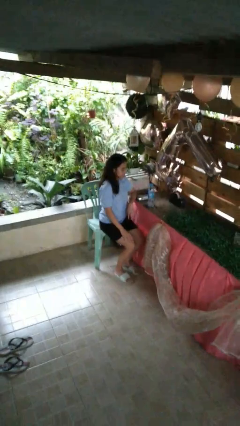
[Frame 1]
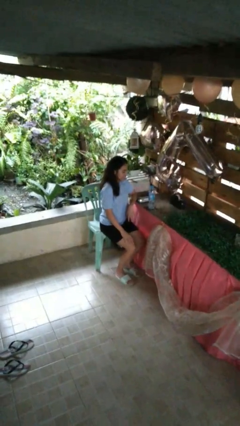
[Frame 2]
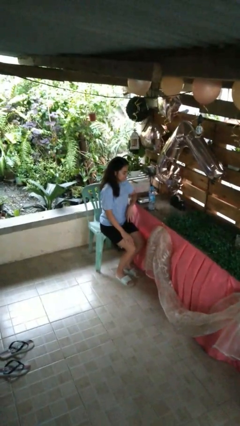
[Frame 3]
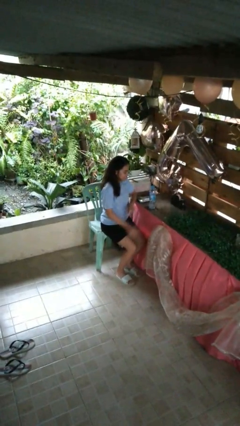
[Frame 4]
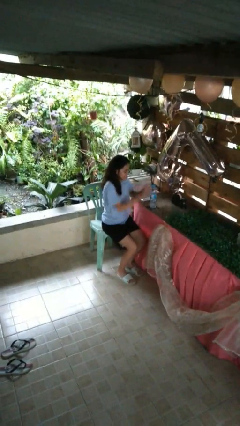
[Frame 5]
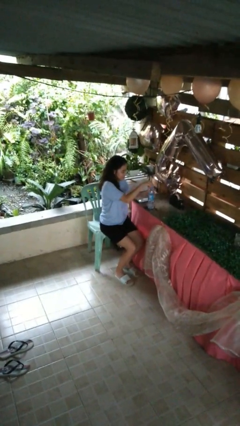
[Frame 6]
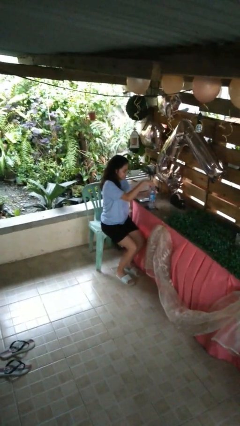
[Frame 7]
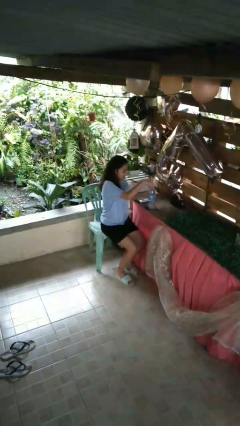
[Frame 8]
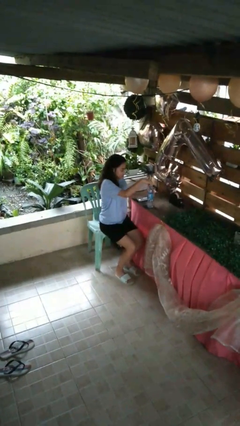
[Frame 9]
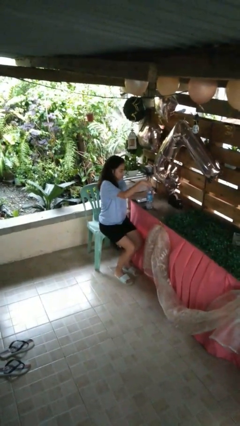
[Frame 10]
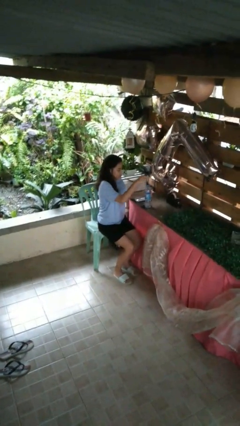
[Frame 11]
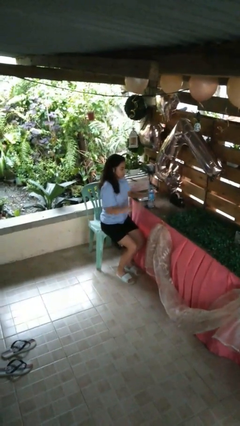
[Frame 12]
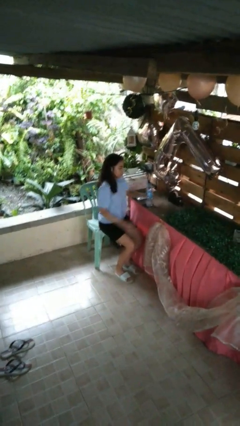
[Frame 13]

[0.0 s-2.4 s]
person unscrews lid from bottle

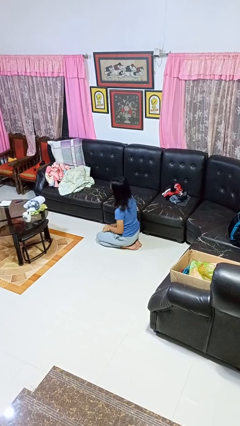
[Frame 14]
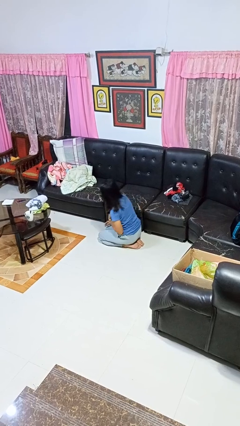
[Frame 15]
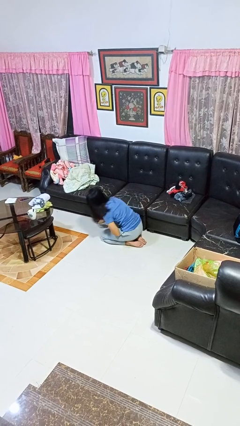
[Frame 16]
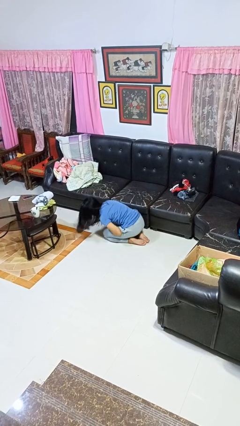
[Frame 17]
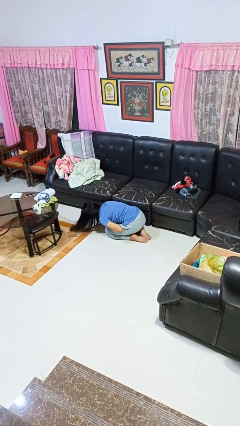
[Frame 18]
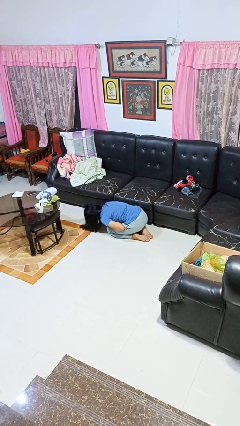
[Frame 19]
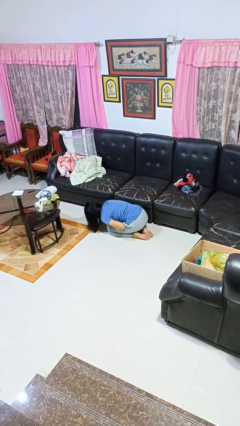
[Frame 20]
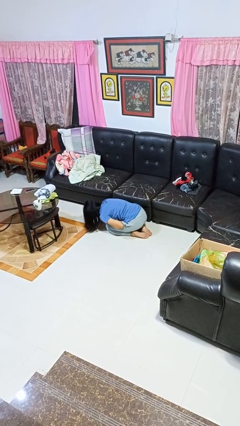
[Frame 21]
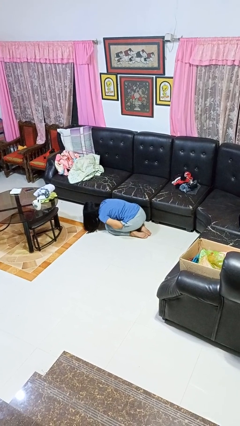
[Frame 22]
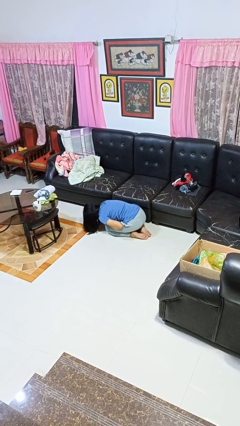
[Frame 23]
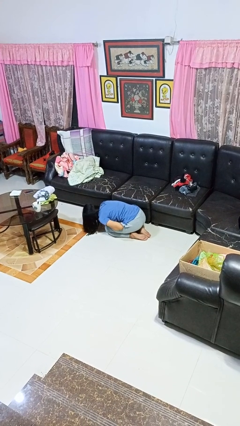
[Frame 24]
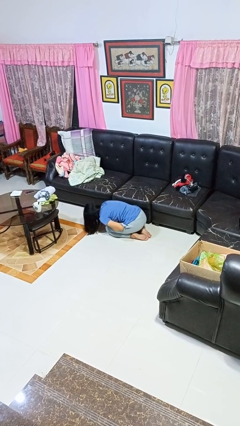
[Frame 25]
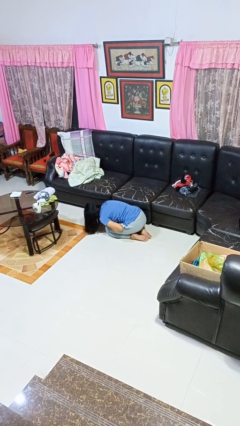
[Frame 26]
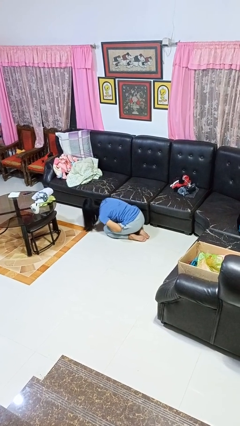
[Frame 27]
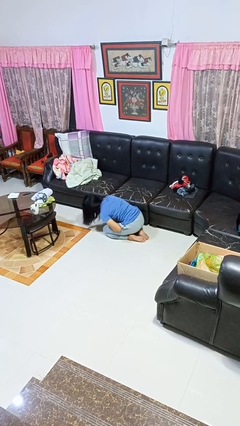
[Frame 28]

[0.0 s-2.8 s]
person searches under couch

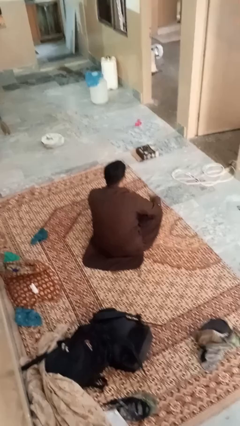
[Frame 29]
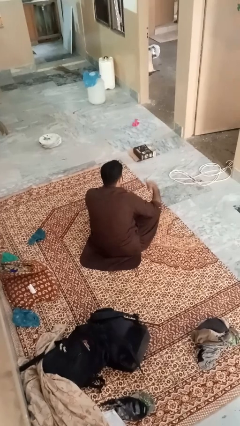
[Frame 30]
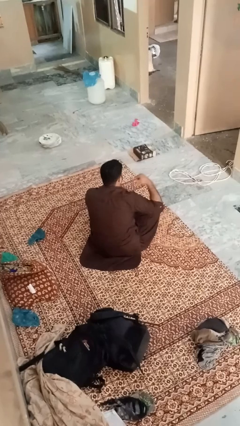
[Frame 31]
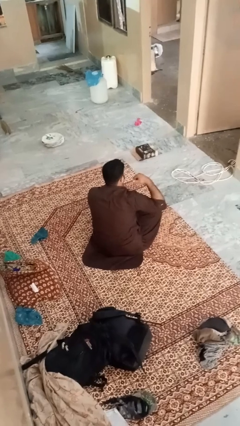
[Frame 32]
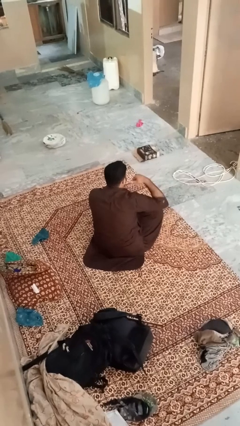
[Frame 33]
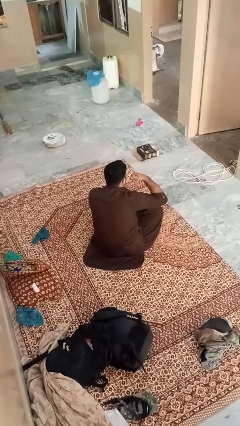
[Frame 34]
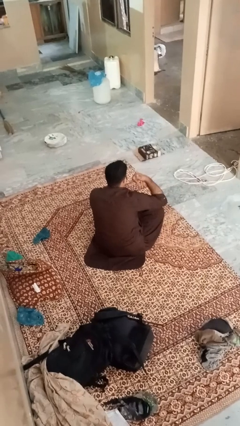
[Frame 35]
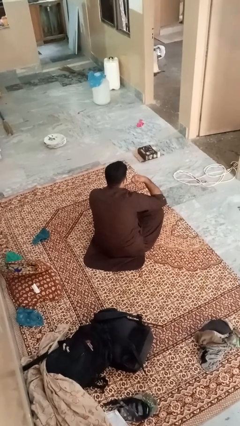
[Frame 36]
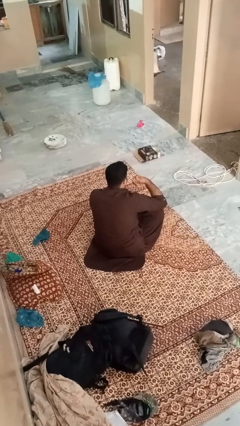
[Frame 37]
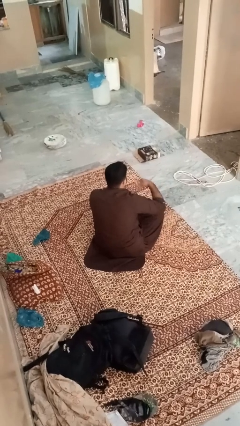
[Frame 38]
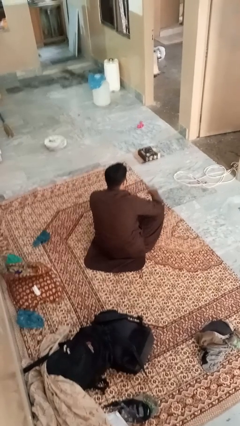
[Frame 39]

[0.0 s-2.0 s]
person gestures call me

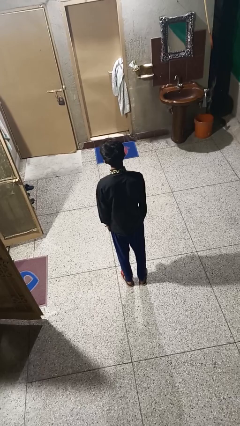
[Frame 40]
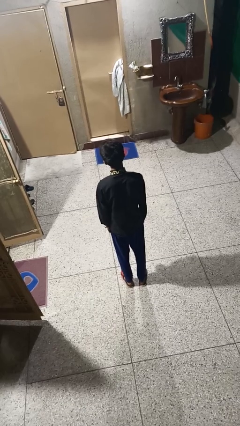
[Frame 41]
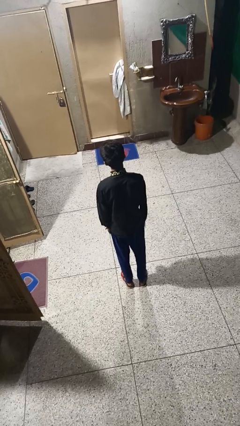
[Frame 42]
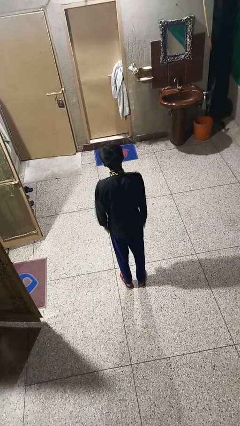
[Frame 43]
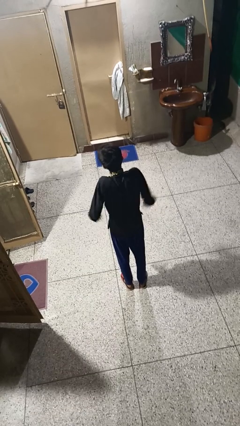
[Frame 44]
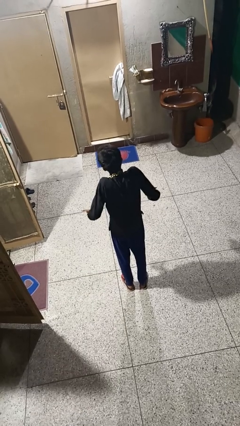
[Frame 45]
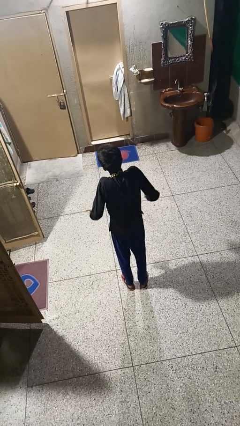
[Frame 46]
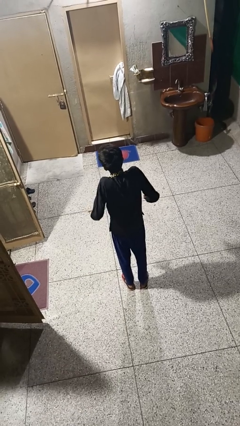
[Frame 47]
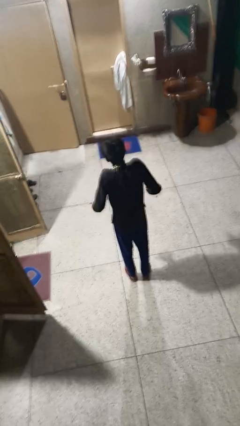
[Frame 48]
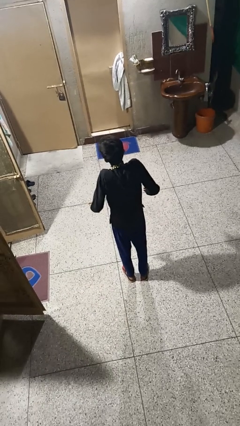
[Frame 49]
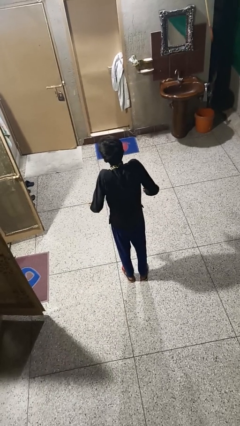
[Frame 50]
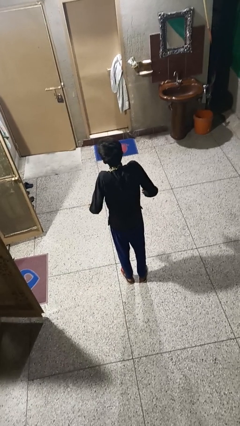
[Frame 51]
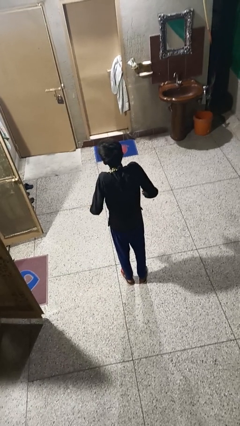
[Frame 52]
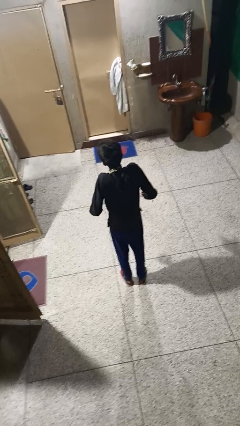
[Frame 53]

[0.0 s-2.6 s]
person shrugs

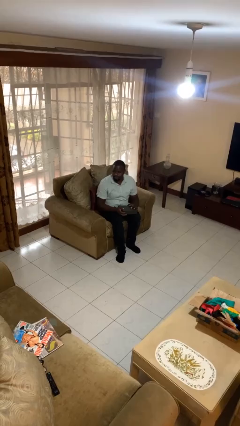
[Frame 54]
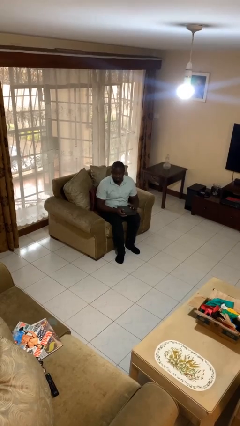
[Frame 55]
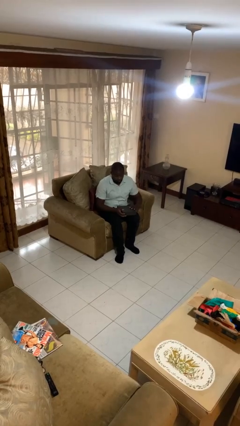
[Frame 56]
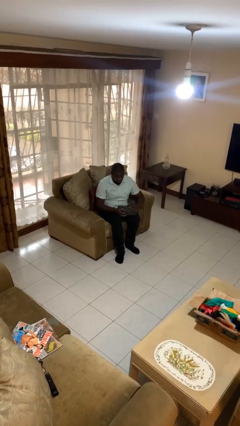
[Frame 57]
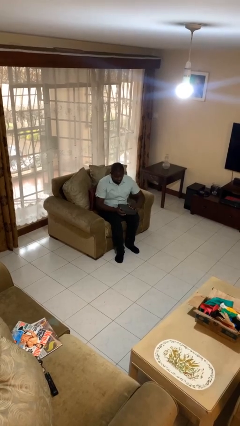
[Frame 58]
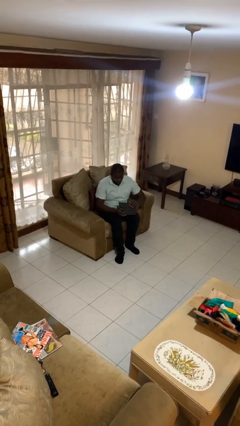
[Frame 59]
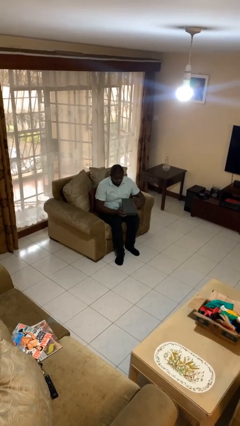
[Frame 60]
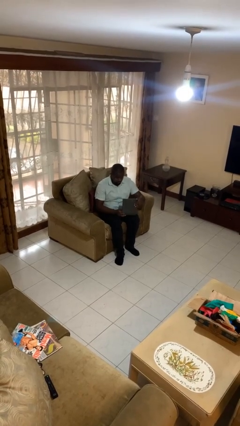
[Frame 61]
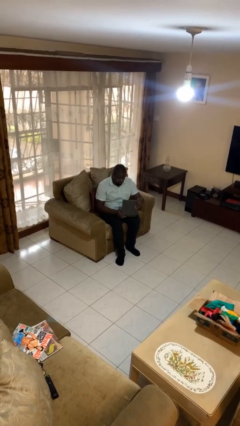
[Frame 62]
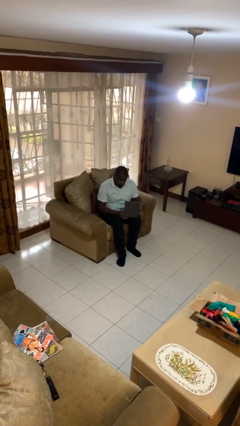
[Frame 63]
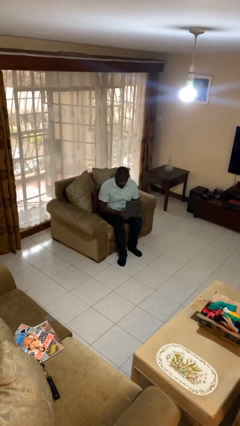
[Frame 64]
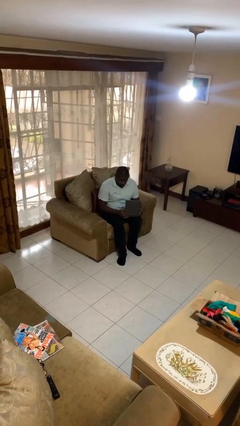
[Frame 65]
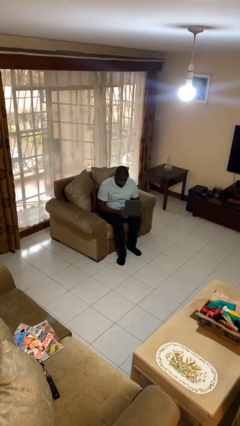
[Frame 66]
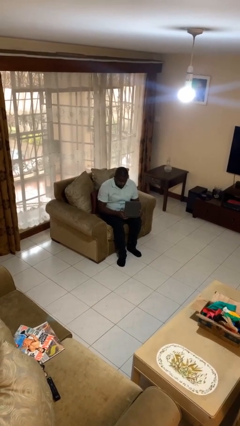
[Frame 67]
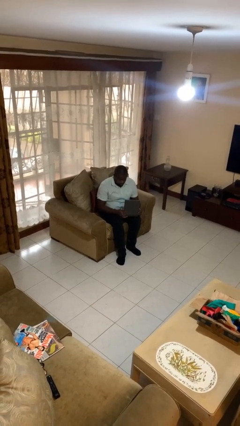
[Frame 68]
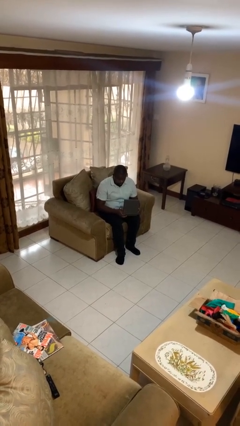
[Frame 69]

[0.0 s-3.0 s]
person opens jewelry box

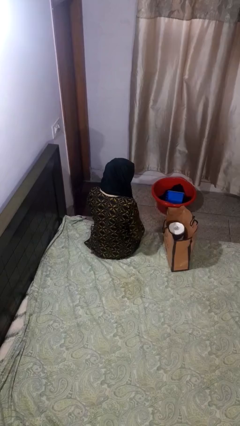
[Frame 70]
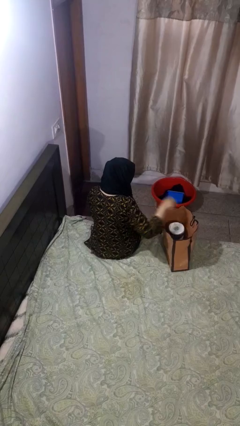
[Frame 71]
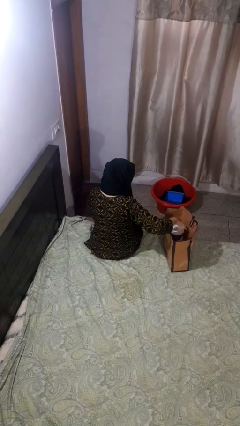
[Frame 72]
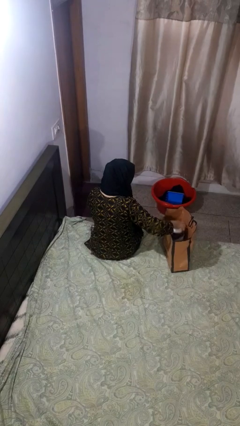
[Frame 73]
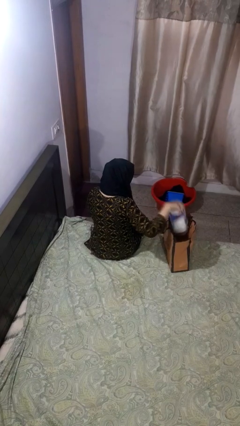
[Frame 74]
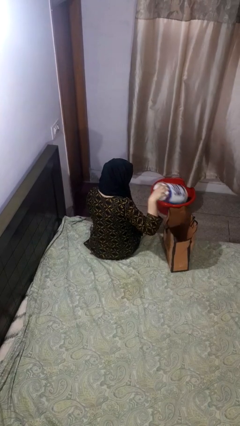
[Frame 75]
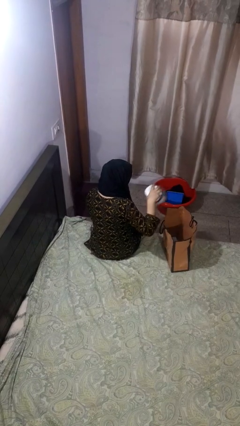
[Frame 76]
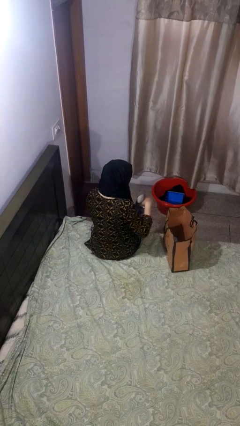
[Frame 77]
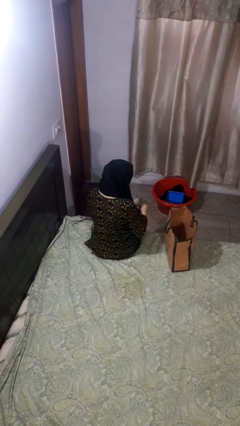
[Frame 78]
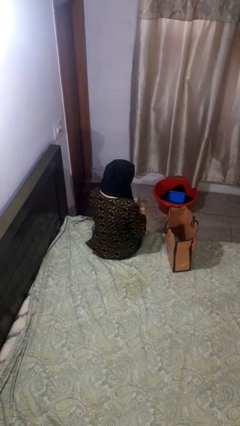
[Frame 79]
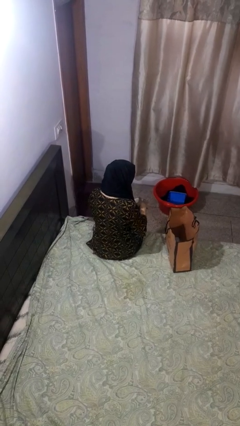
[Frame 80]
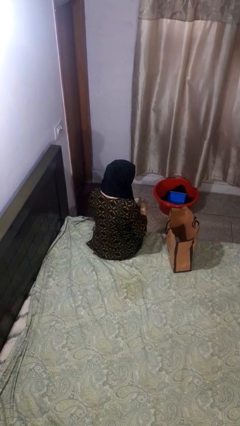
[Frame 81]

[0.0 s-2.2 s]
person takes object from bag

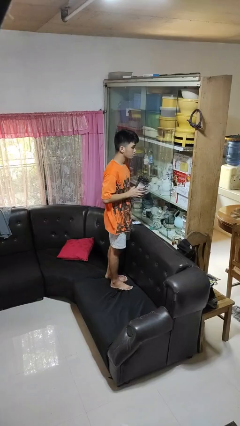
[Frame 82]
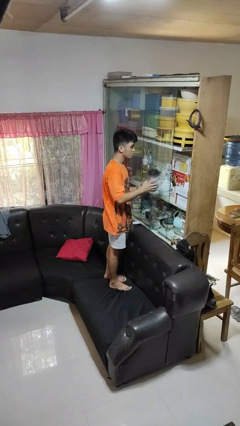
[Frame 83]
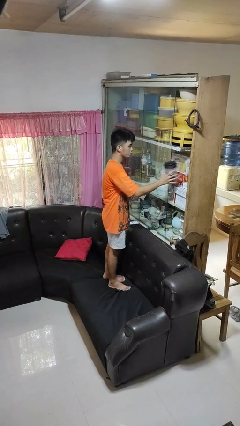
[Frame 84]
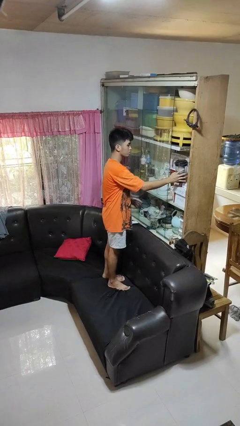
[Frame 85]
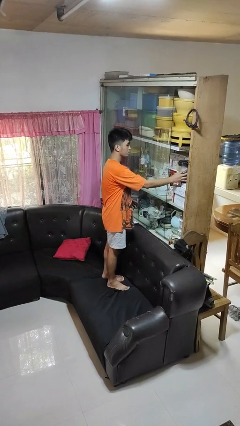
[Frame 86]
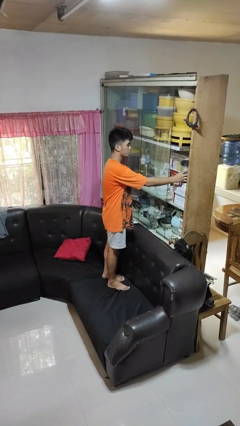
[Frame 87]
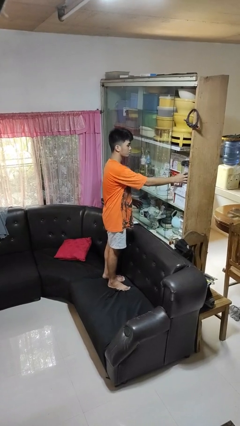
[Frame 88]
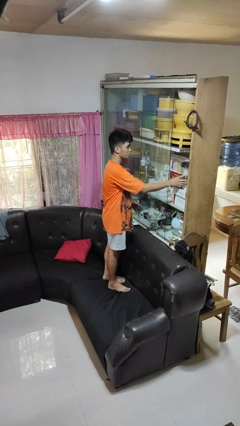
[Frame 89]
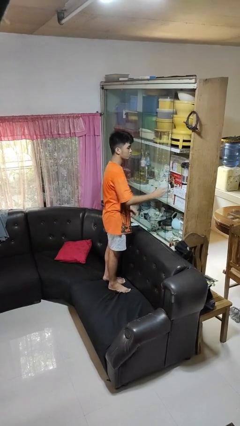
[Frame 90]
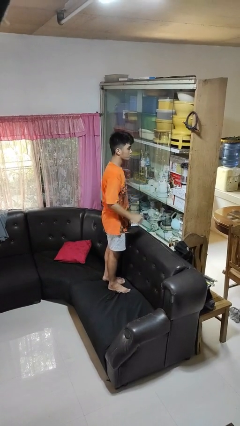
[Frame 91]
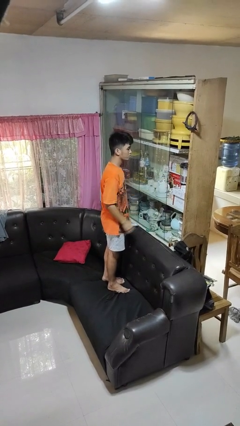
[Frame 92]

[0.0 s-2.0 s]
person puts down object into cabinet
